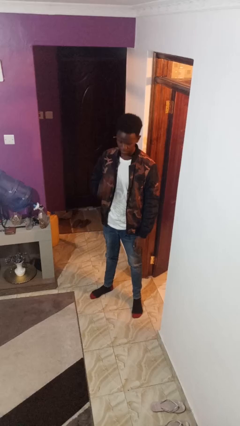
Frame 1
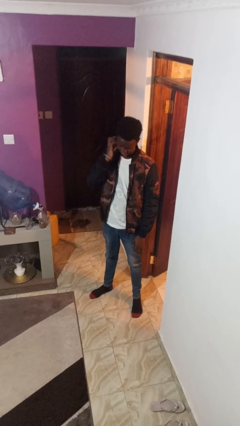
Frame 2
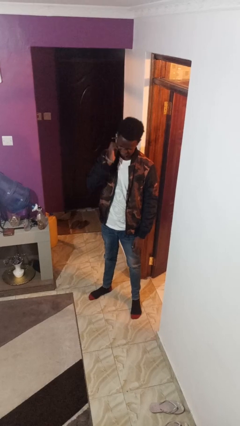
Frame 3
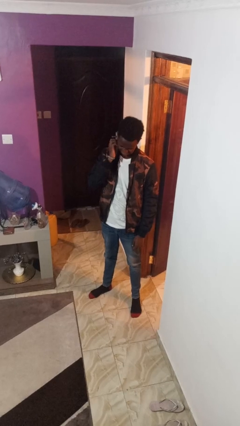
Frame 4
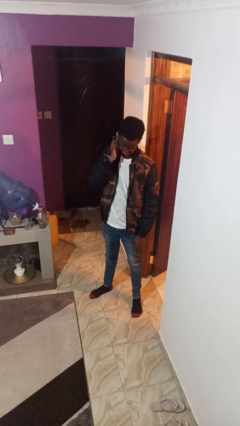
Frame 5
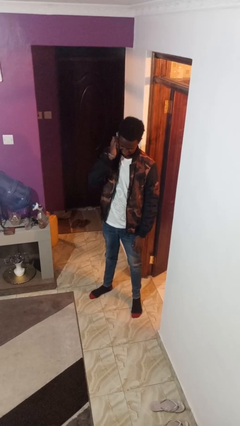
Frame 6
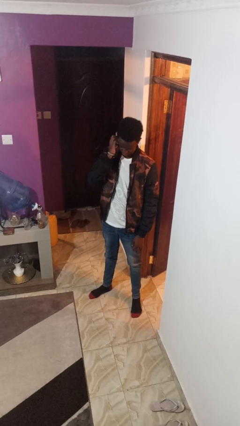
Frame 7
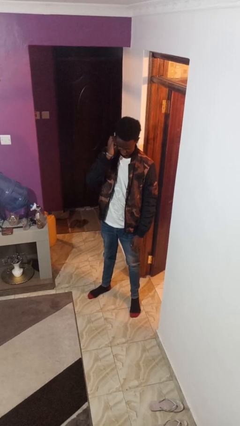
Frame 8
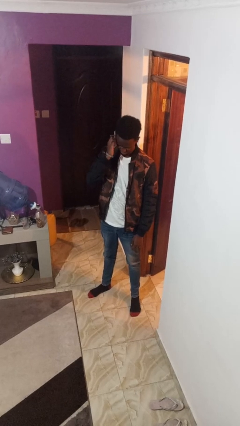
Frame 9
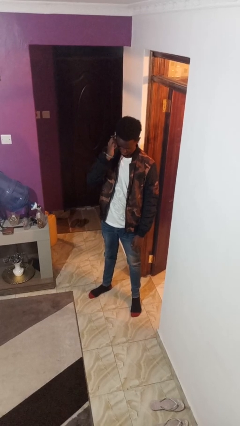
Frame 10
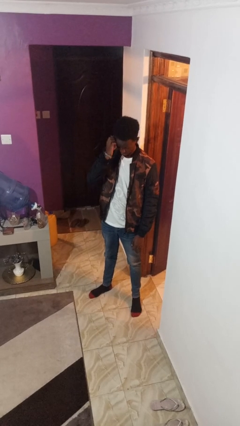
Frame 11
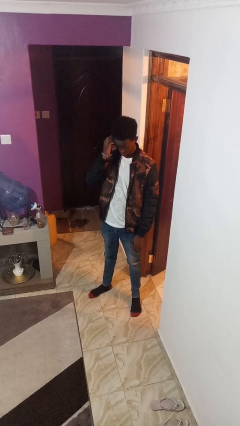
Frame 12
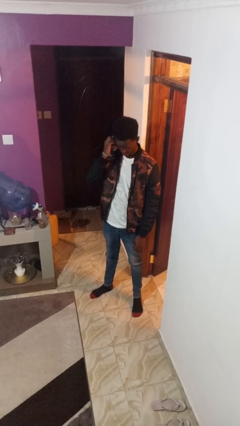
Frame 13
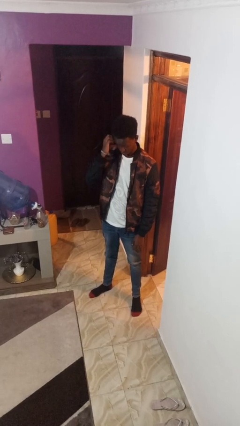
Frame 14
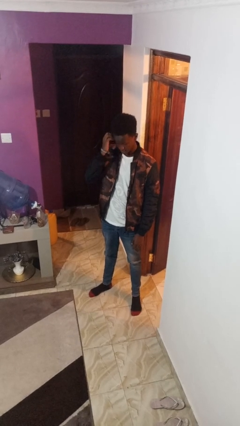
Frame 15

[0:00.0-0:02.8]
person scratches face

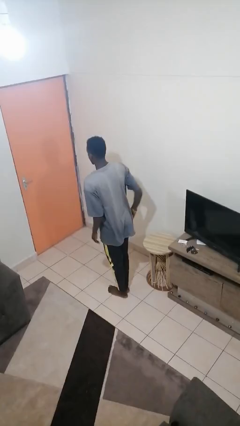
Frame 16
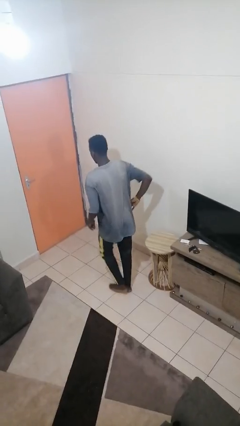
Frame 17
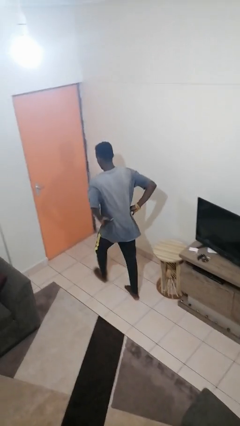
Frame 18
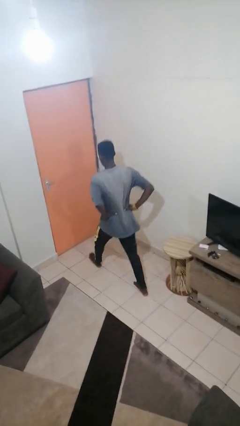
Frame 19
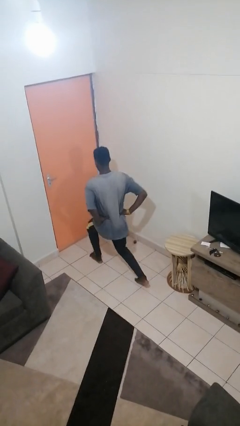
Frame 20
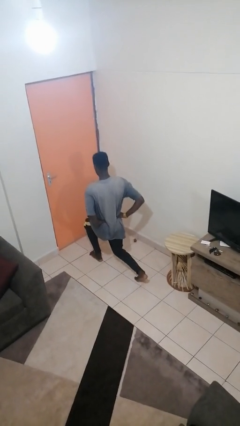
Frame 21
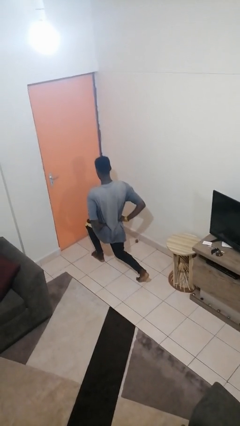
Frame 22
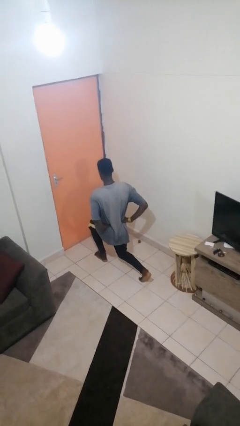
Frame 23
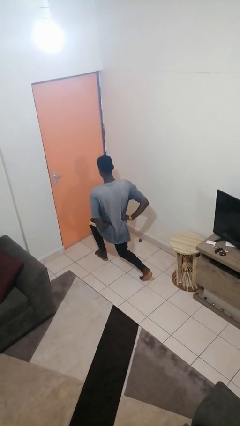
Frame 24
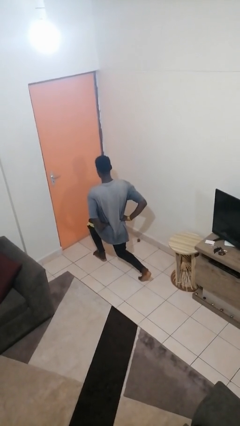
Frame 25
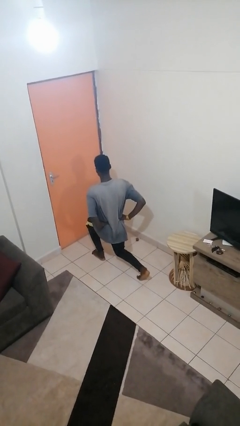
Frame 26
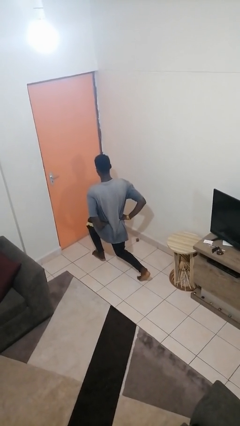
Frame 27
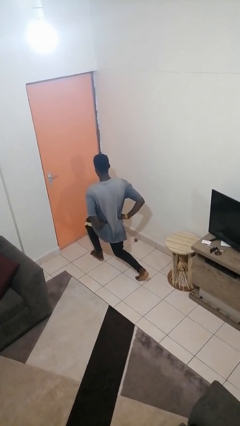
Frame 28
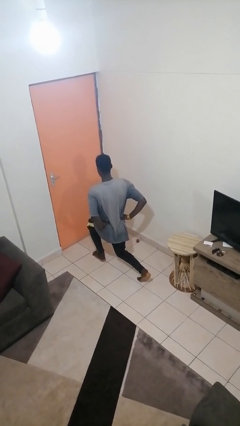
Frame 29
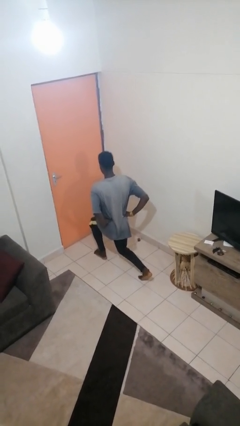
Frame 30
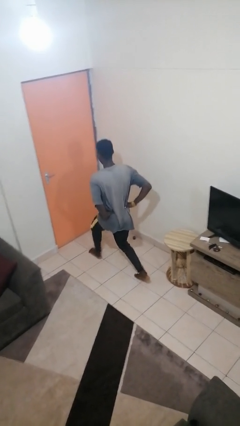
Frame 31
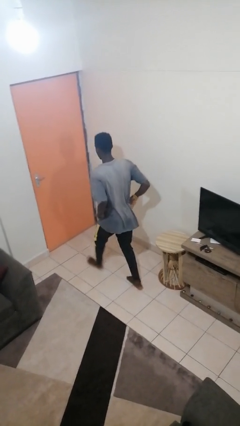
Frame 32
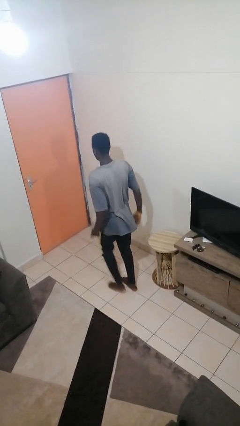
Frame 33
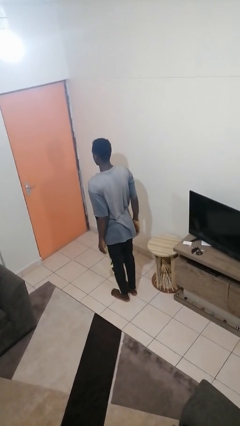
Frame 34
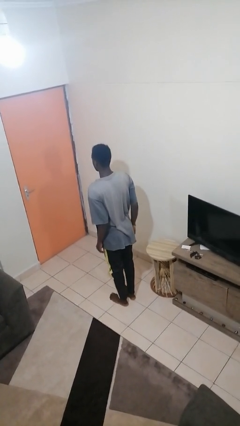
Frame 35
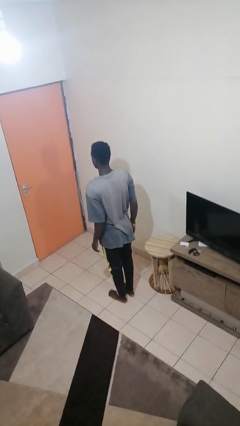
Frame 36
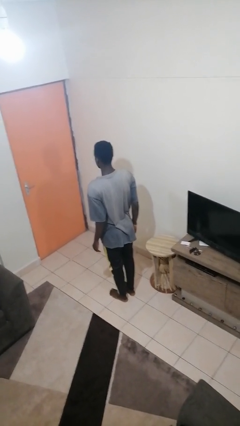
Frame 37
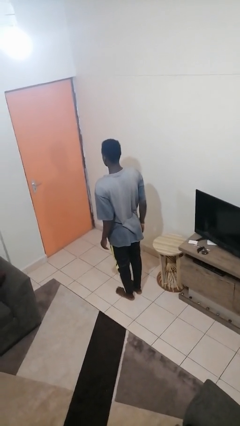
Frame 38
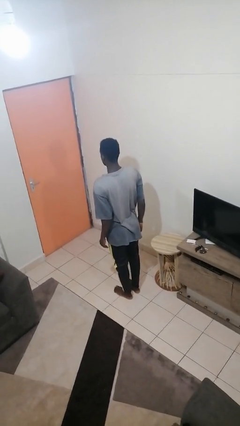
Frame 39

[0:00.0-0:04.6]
person exercises with lunges

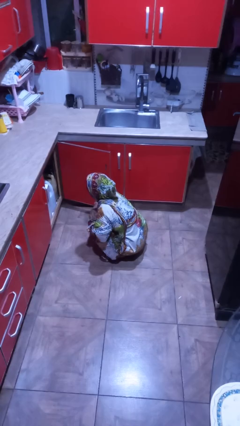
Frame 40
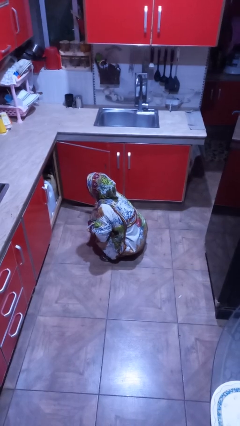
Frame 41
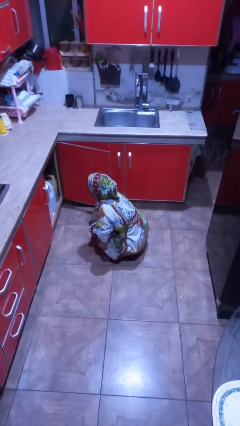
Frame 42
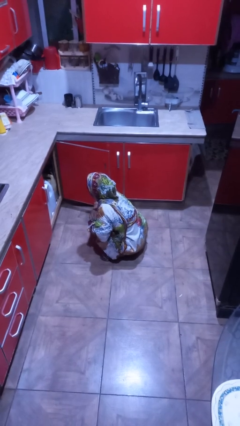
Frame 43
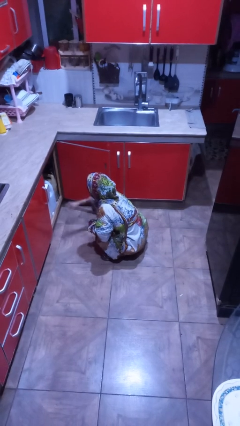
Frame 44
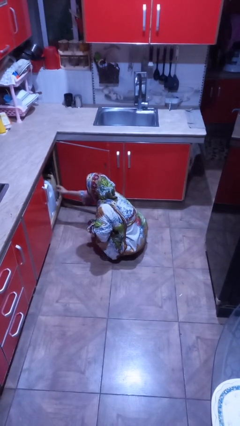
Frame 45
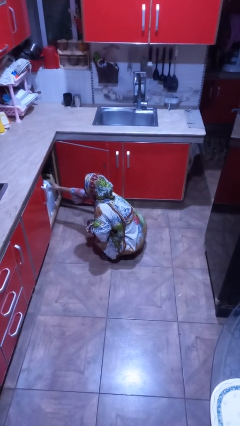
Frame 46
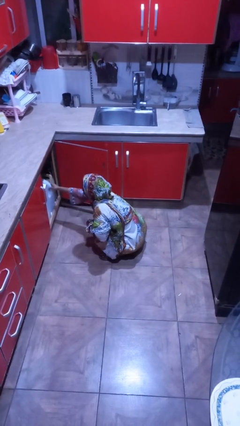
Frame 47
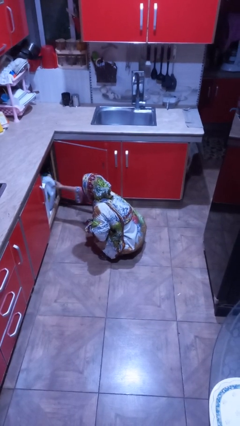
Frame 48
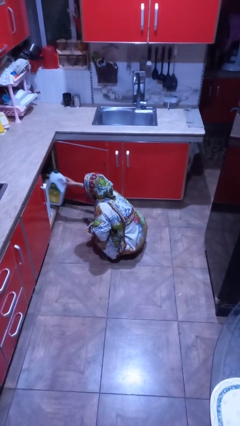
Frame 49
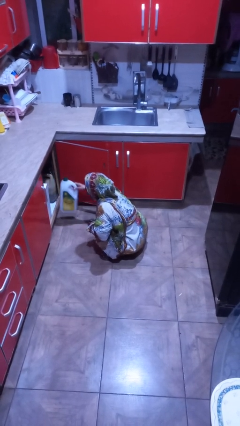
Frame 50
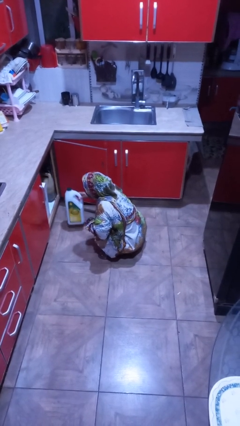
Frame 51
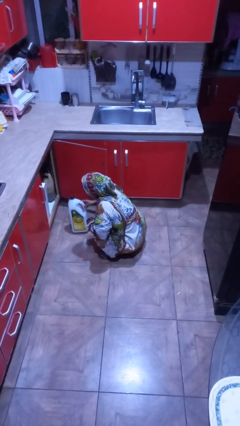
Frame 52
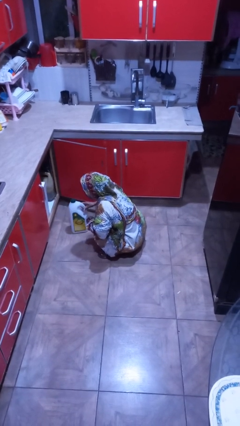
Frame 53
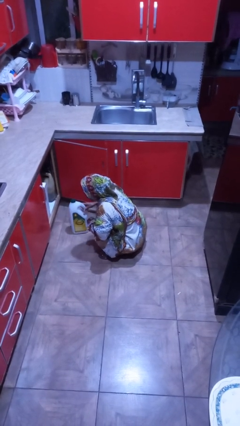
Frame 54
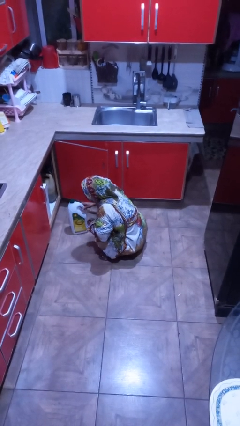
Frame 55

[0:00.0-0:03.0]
person takes object from cabinet

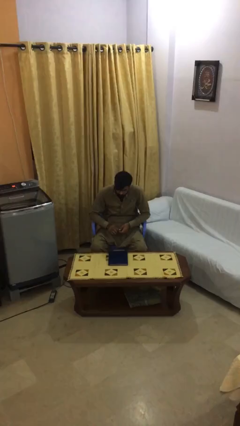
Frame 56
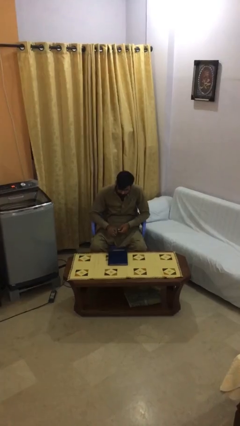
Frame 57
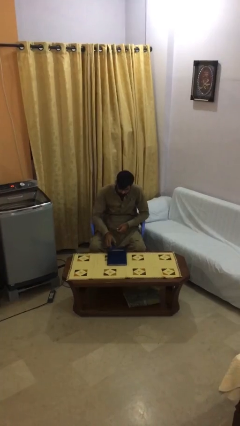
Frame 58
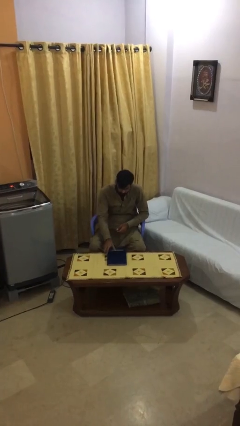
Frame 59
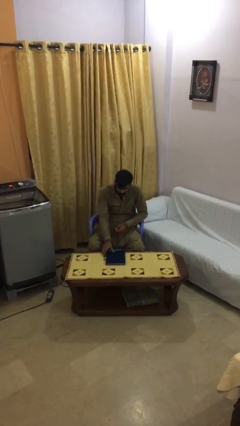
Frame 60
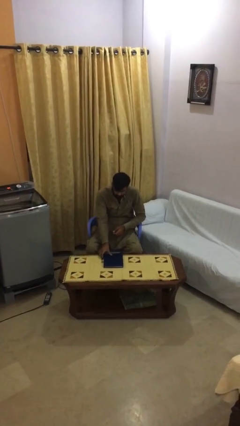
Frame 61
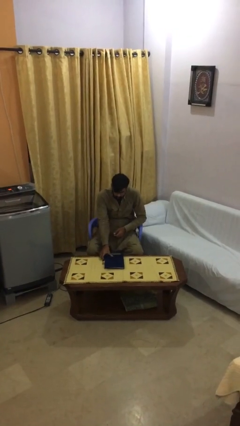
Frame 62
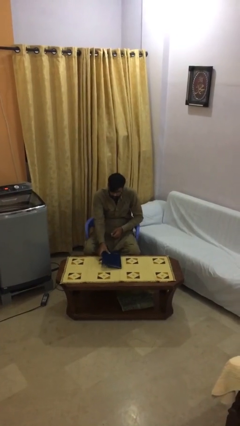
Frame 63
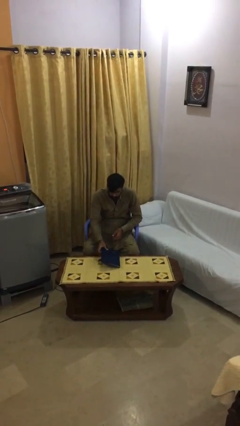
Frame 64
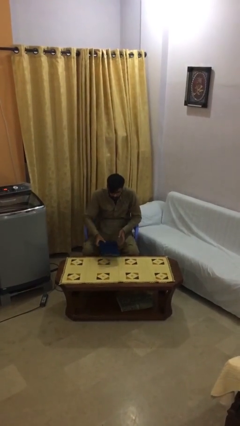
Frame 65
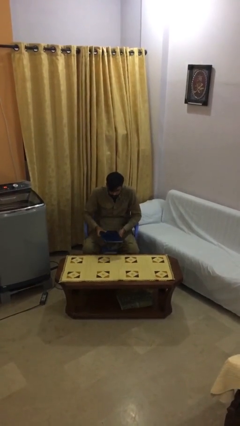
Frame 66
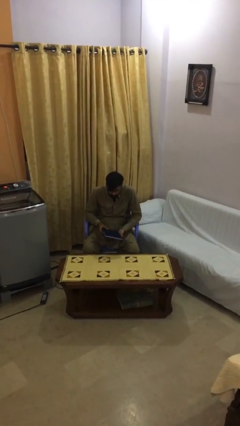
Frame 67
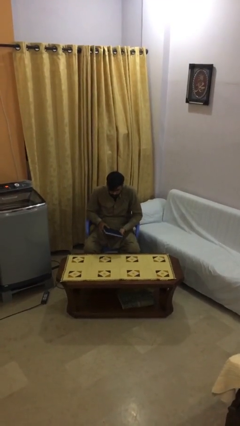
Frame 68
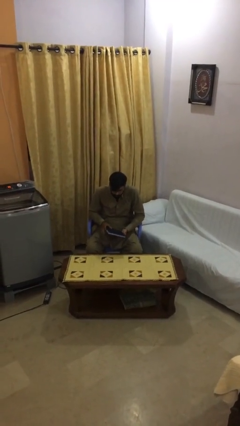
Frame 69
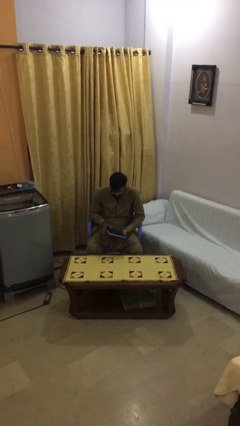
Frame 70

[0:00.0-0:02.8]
person picks up object from table

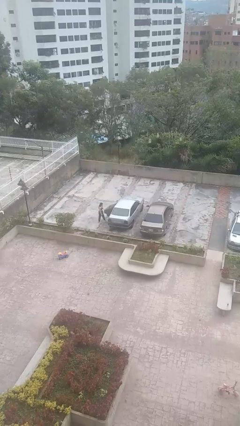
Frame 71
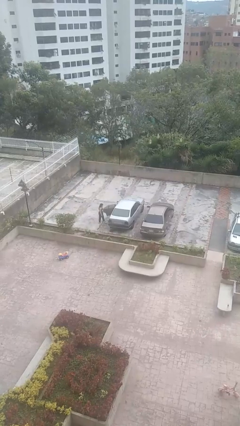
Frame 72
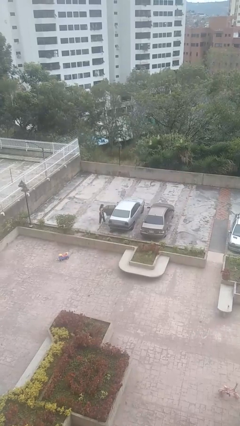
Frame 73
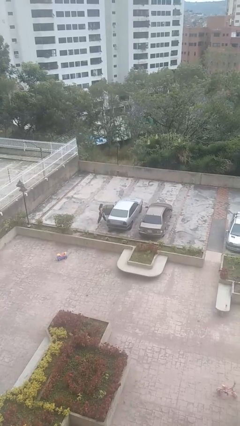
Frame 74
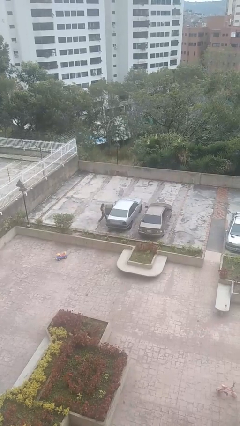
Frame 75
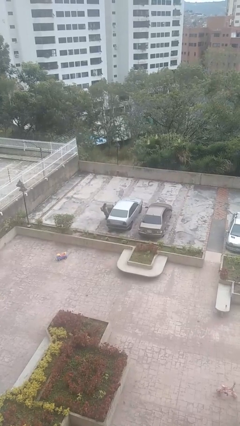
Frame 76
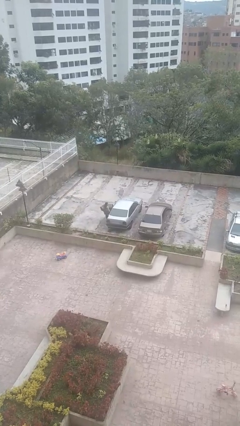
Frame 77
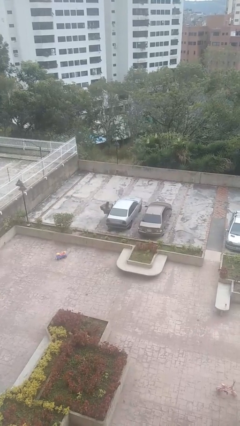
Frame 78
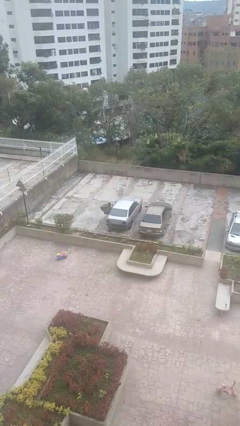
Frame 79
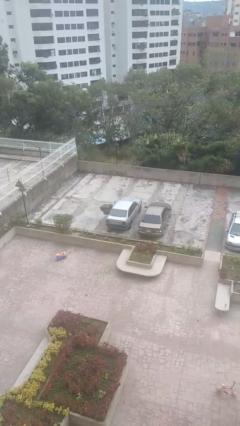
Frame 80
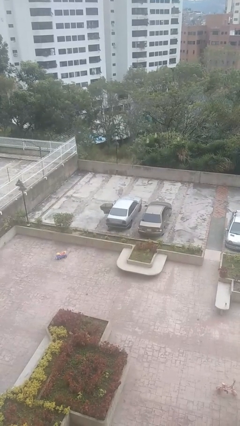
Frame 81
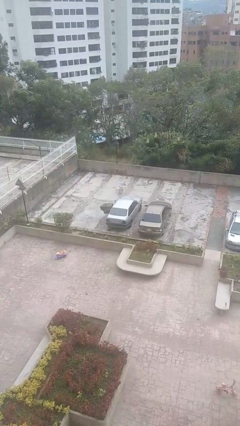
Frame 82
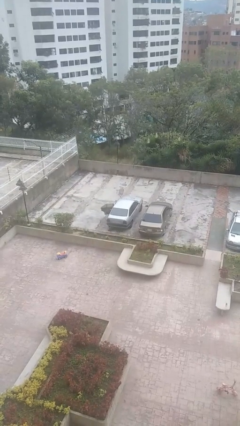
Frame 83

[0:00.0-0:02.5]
car picks up person

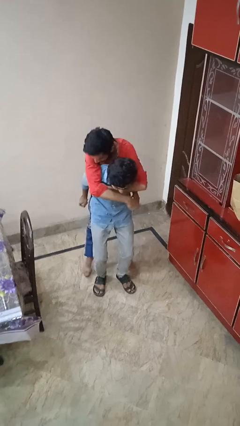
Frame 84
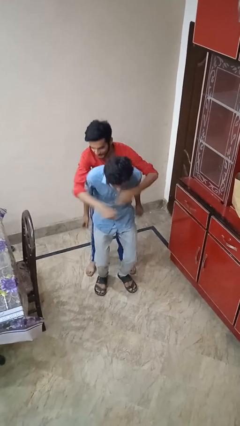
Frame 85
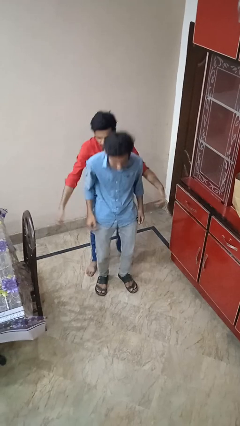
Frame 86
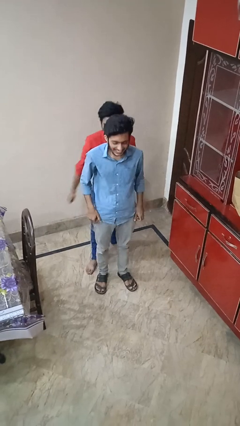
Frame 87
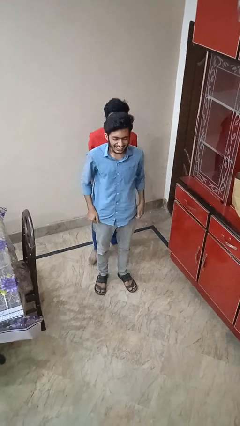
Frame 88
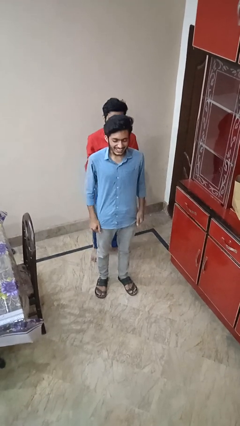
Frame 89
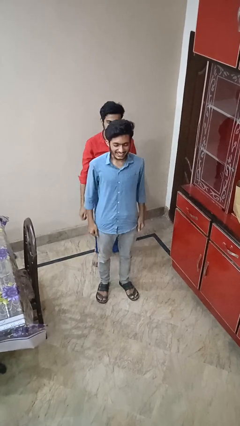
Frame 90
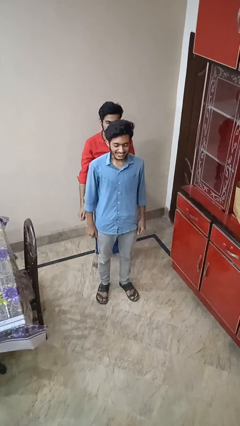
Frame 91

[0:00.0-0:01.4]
person puts down person

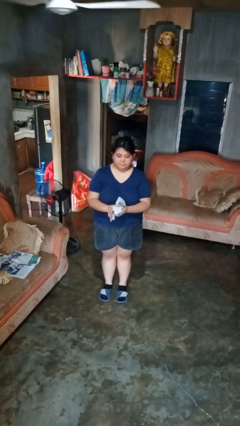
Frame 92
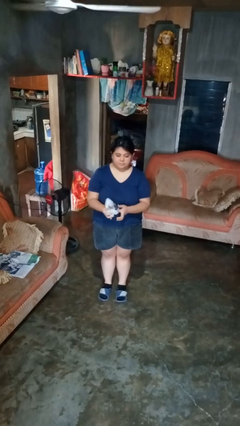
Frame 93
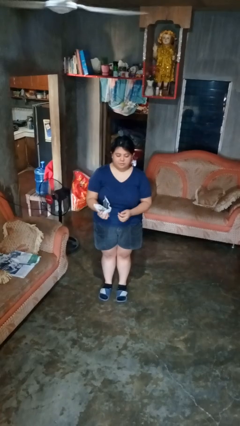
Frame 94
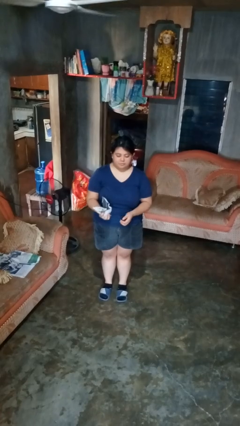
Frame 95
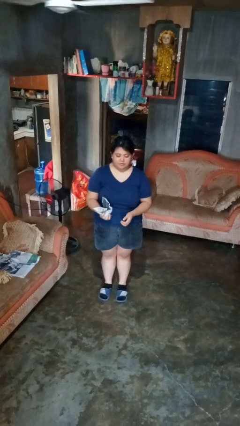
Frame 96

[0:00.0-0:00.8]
person crumples paper
